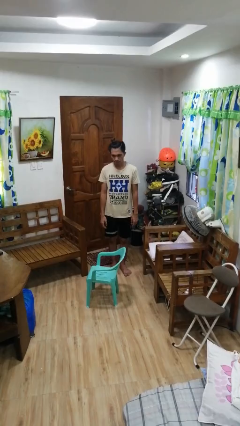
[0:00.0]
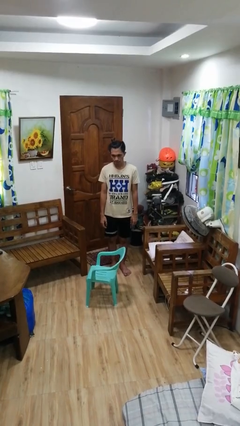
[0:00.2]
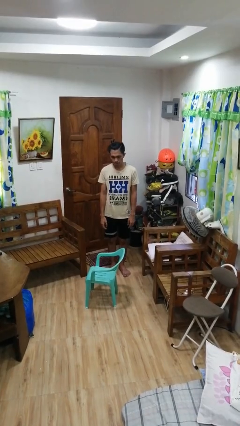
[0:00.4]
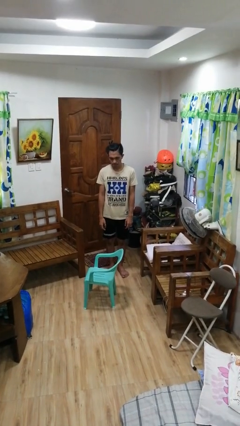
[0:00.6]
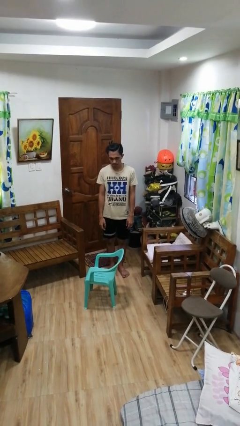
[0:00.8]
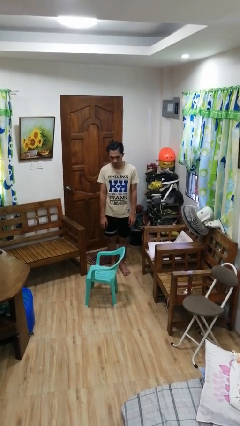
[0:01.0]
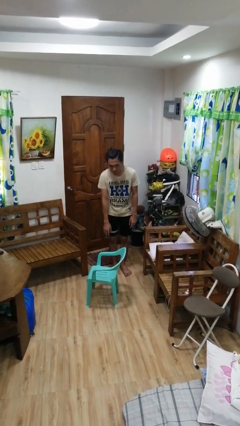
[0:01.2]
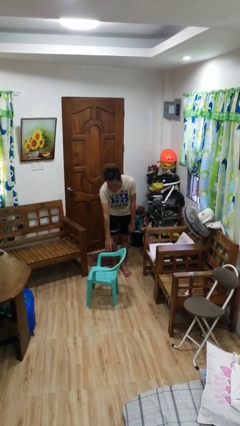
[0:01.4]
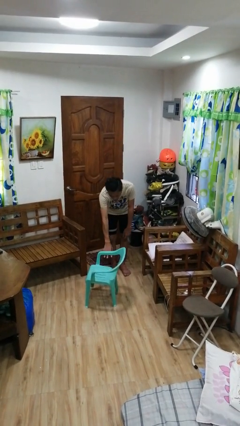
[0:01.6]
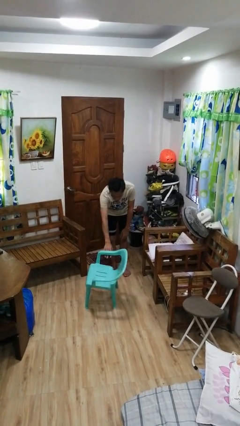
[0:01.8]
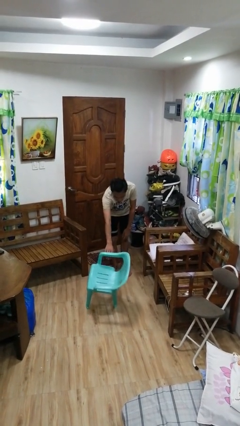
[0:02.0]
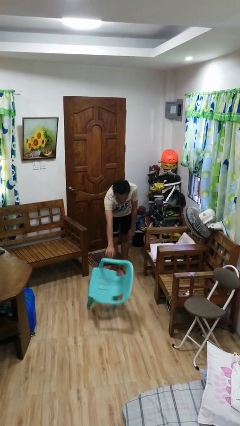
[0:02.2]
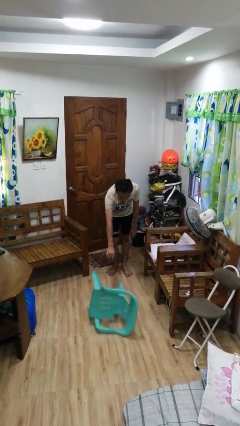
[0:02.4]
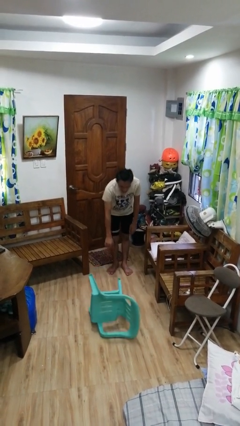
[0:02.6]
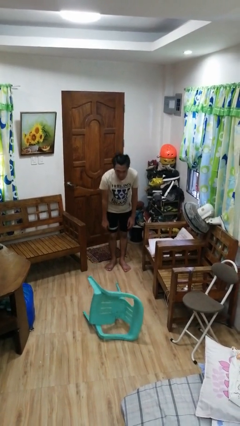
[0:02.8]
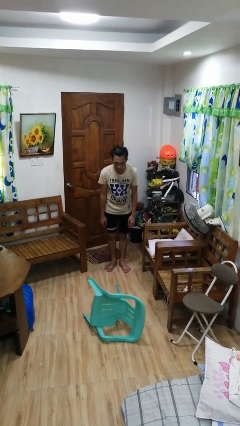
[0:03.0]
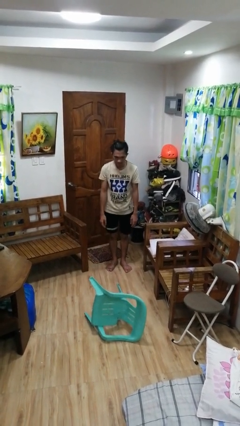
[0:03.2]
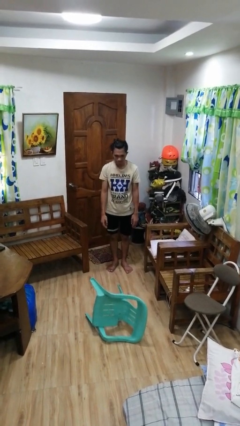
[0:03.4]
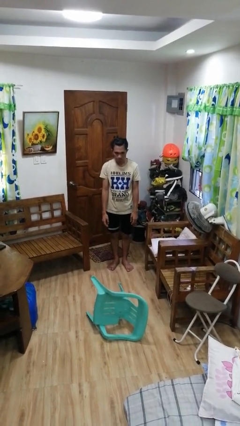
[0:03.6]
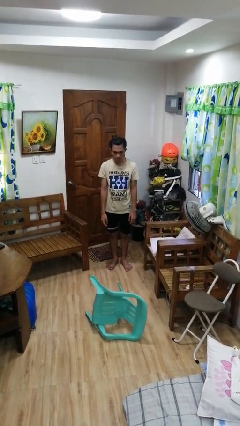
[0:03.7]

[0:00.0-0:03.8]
person knocks over furniture

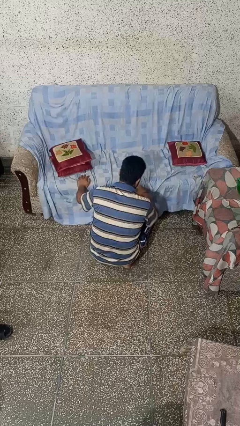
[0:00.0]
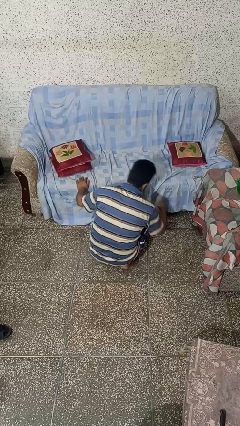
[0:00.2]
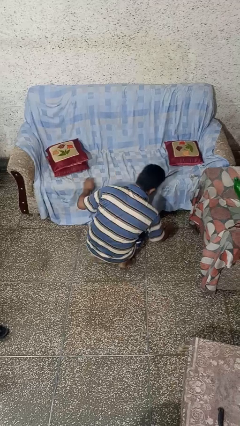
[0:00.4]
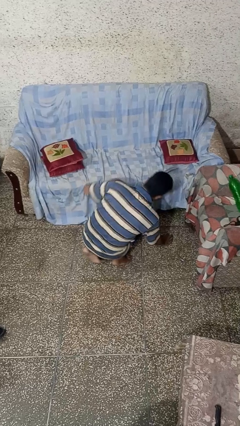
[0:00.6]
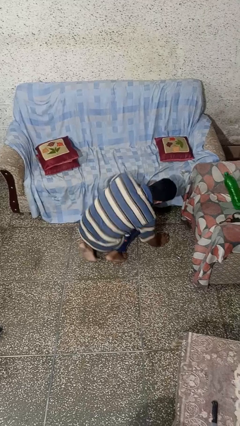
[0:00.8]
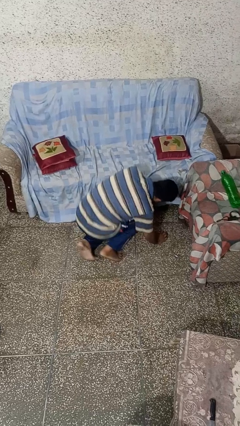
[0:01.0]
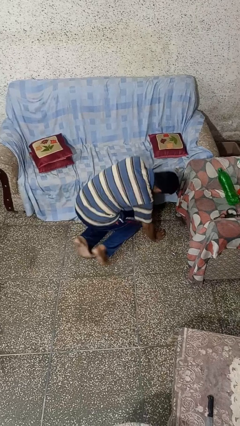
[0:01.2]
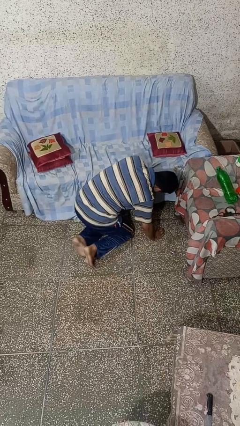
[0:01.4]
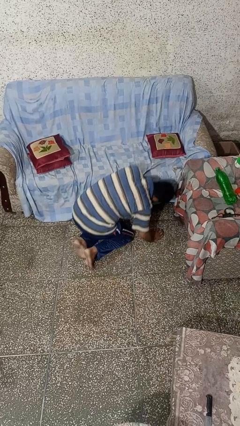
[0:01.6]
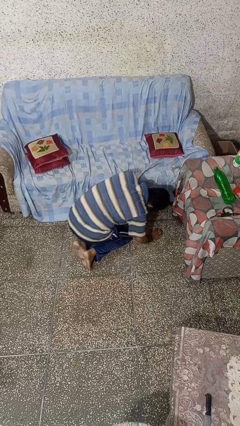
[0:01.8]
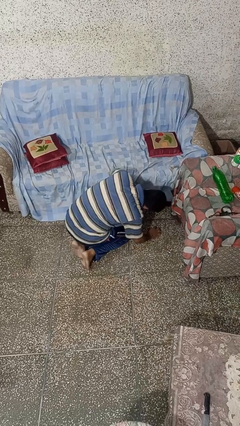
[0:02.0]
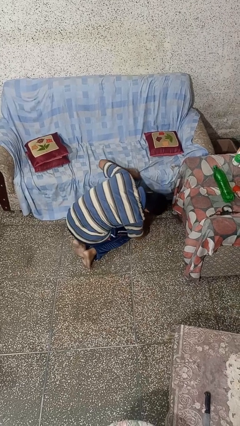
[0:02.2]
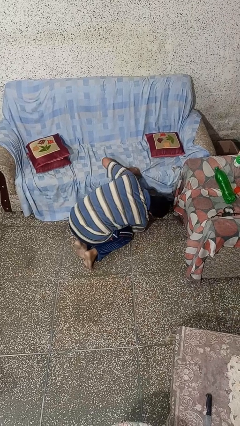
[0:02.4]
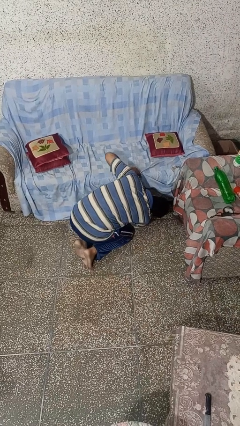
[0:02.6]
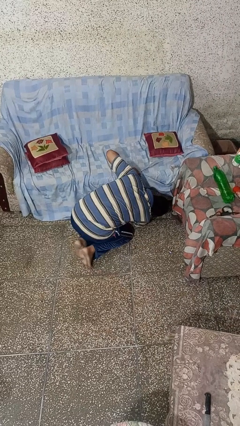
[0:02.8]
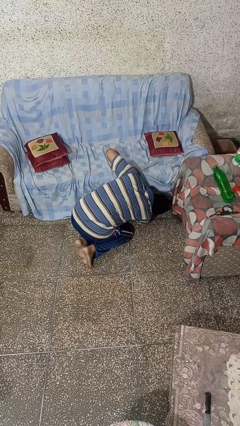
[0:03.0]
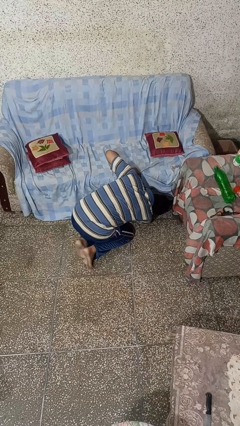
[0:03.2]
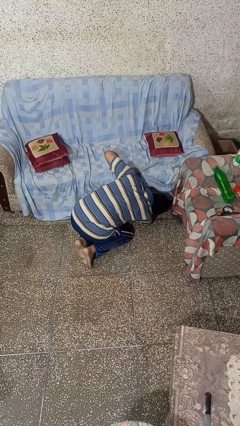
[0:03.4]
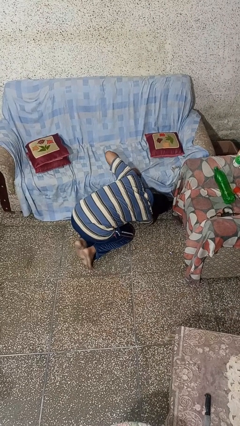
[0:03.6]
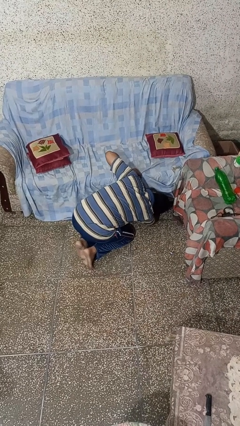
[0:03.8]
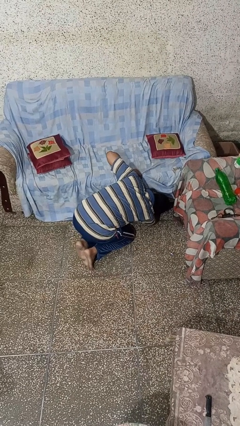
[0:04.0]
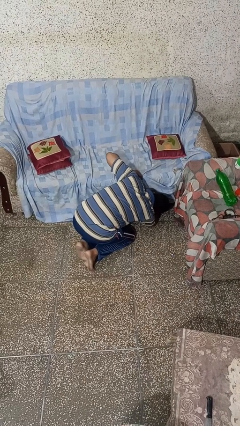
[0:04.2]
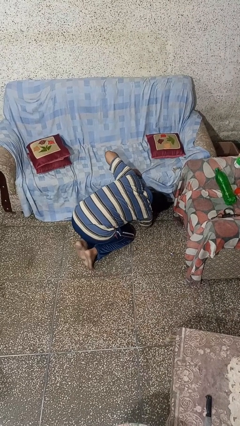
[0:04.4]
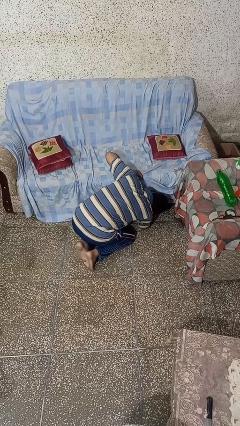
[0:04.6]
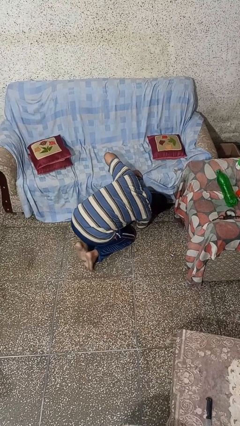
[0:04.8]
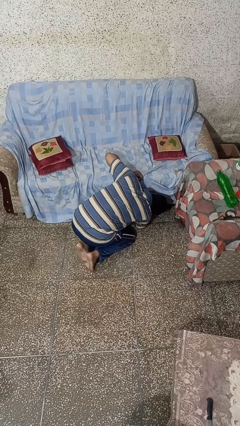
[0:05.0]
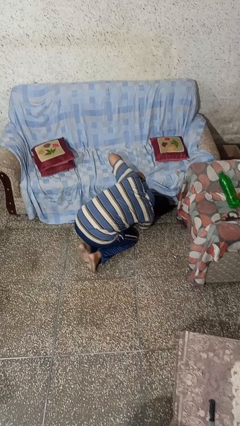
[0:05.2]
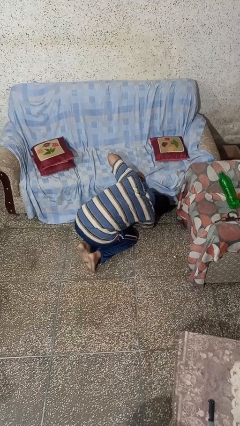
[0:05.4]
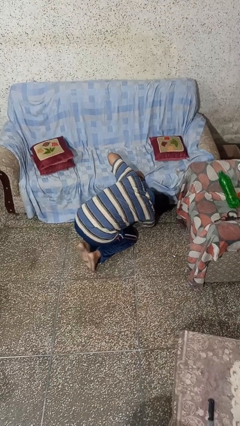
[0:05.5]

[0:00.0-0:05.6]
person searches under couch

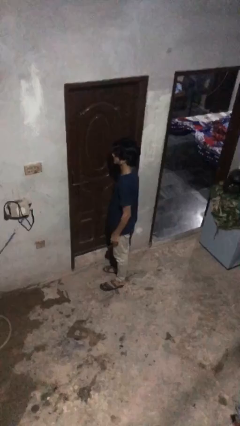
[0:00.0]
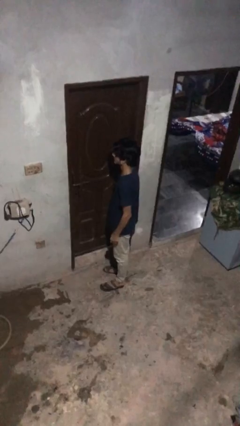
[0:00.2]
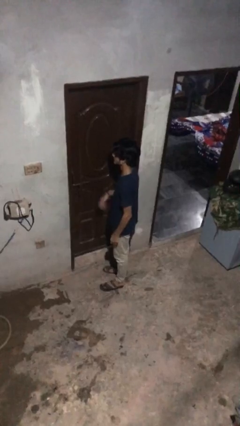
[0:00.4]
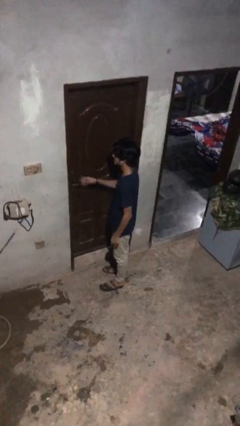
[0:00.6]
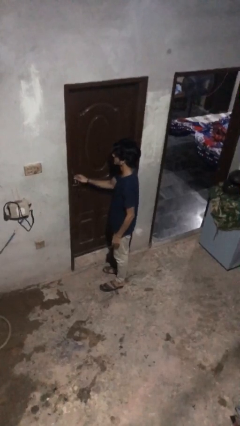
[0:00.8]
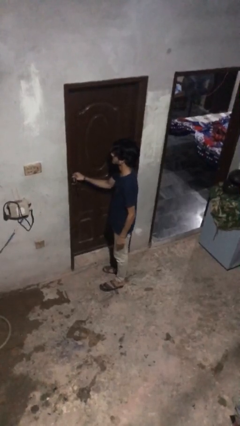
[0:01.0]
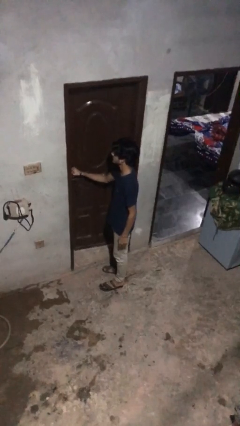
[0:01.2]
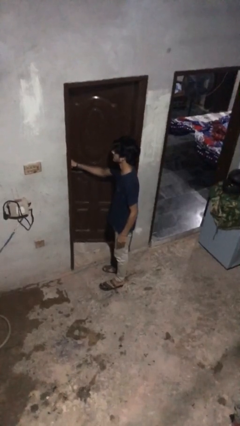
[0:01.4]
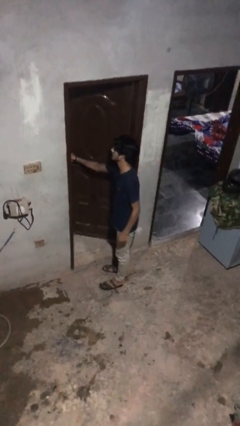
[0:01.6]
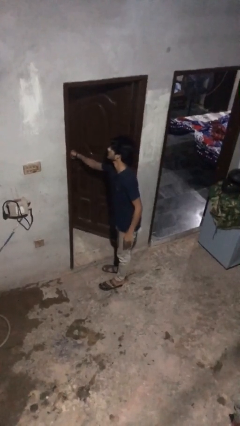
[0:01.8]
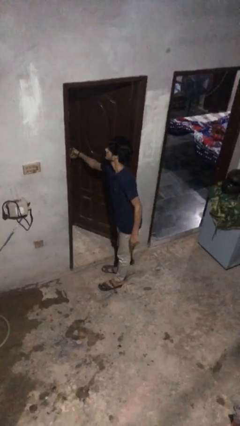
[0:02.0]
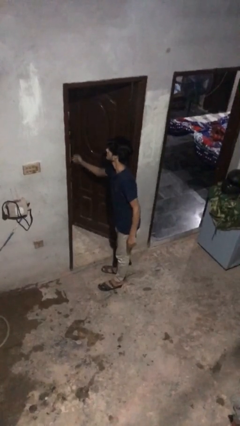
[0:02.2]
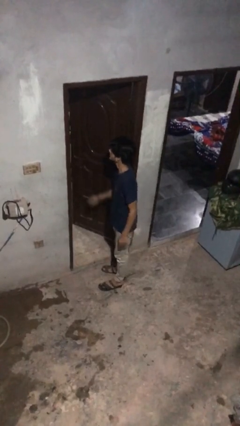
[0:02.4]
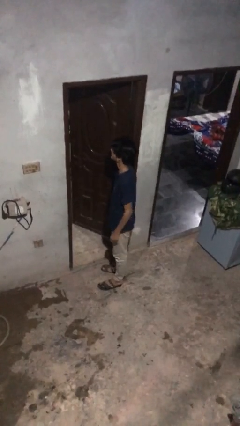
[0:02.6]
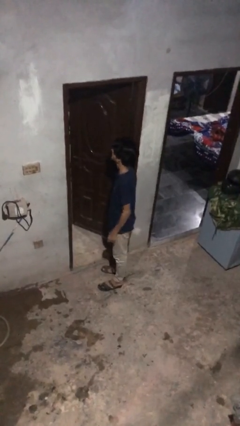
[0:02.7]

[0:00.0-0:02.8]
person opens facility door

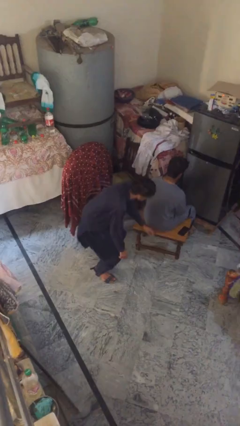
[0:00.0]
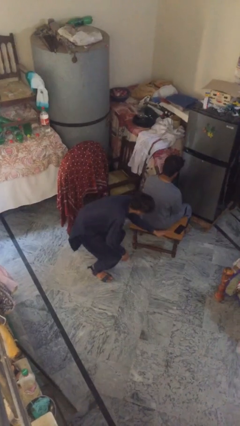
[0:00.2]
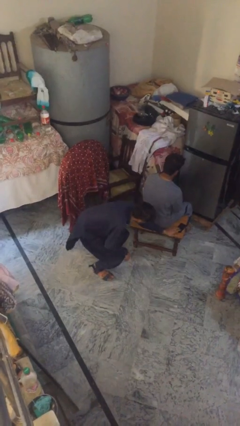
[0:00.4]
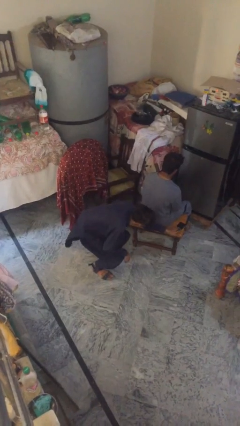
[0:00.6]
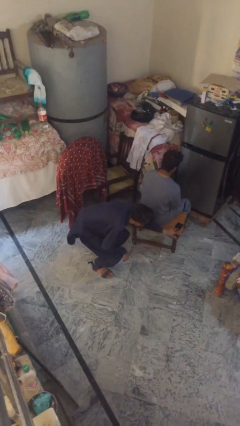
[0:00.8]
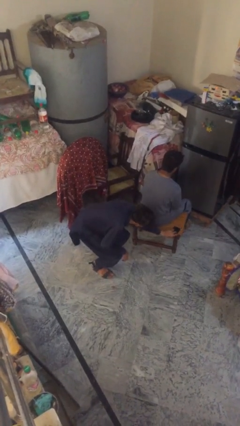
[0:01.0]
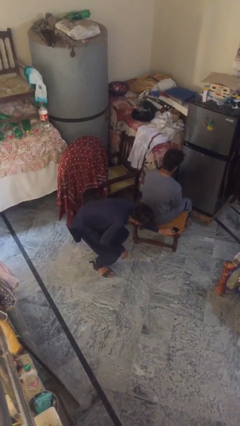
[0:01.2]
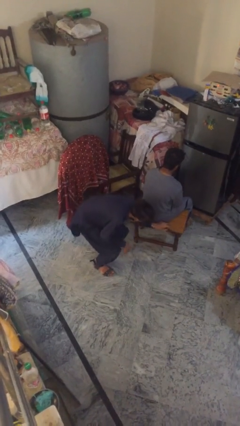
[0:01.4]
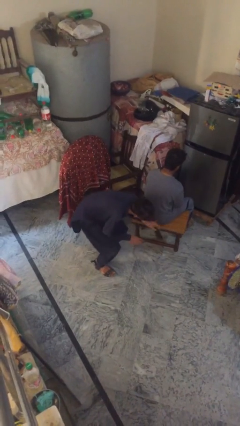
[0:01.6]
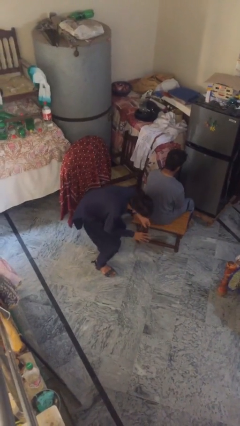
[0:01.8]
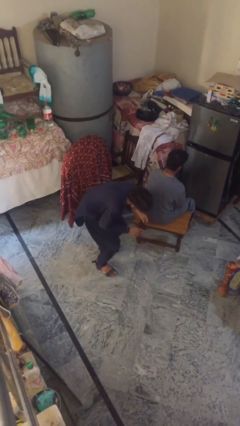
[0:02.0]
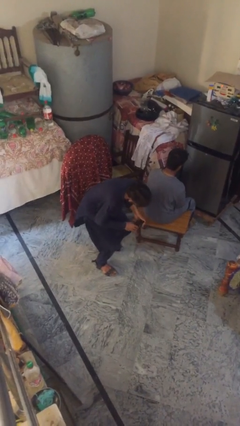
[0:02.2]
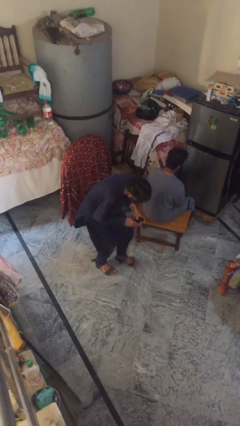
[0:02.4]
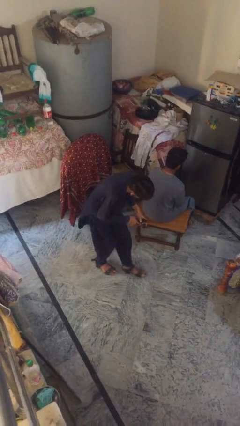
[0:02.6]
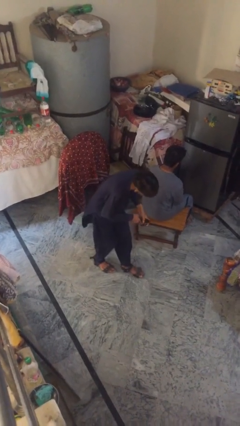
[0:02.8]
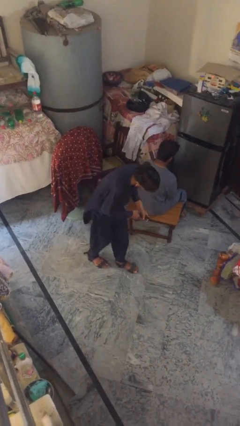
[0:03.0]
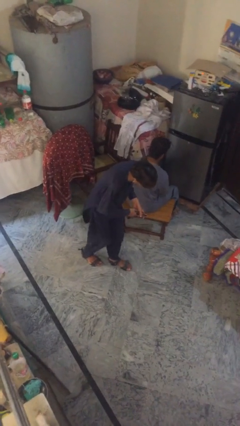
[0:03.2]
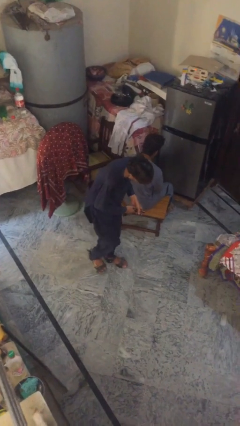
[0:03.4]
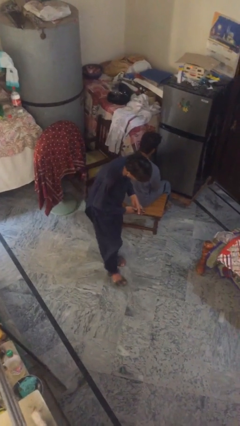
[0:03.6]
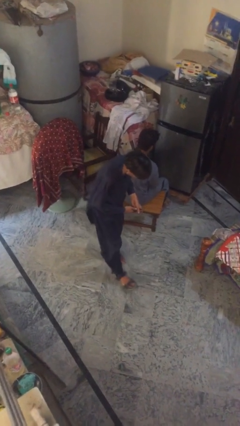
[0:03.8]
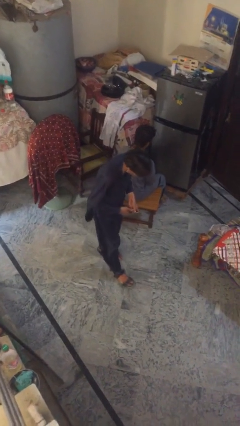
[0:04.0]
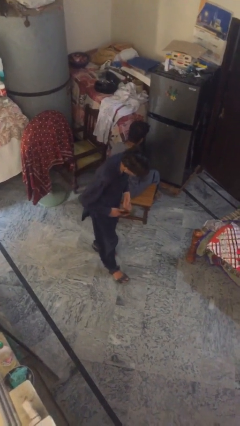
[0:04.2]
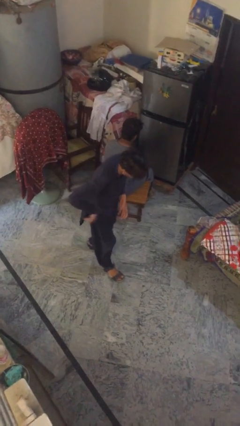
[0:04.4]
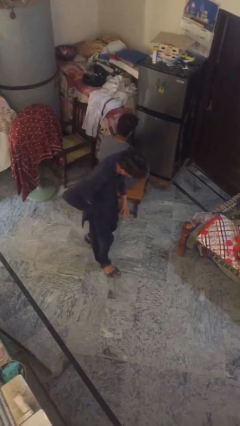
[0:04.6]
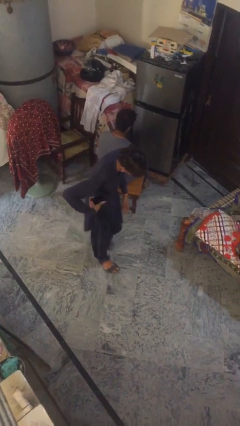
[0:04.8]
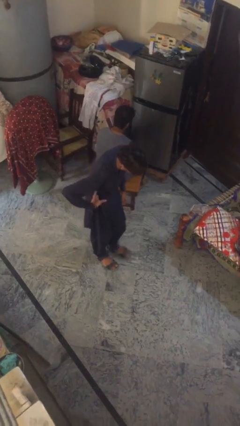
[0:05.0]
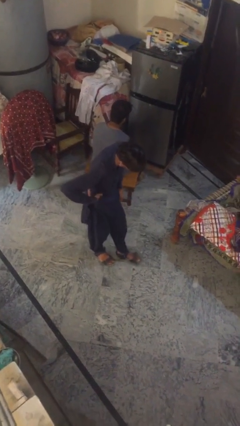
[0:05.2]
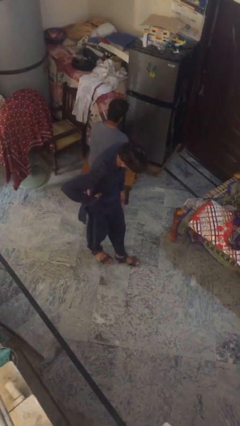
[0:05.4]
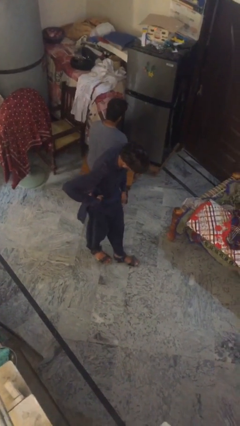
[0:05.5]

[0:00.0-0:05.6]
person steals object from person
